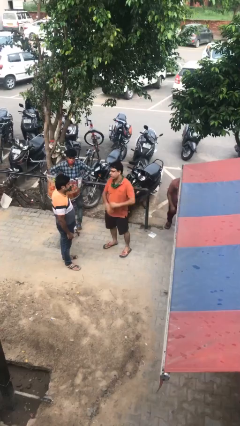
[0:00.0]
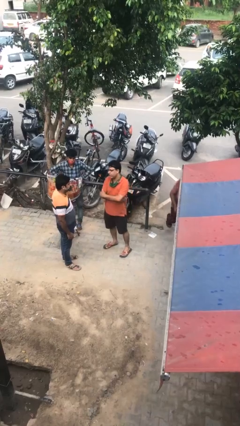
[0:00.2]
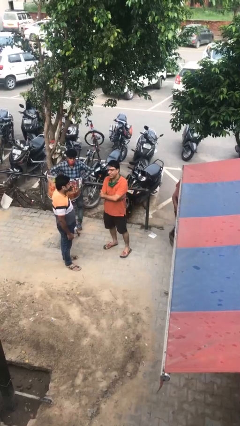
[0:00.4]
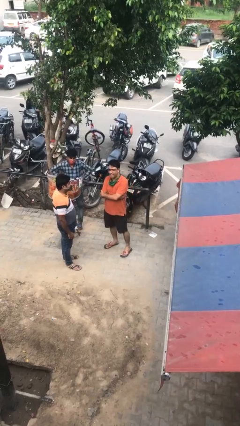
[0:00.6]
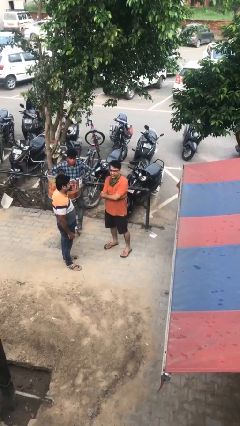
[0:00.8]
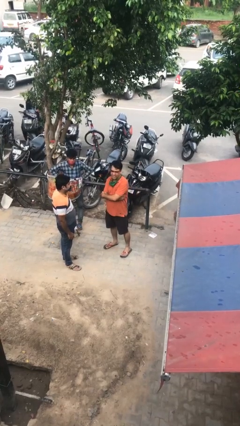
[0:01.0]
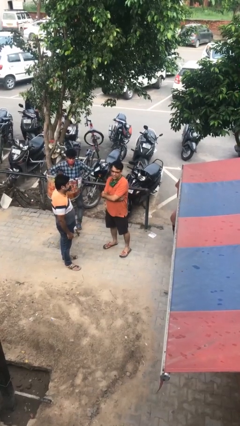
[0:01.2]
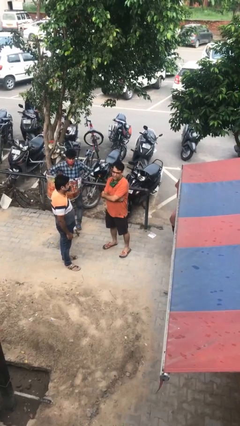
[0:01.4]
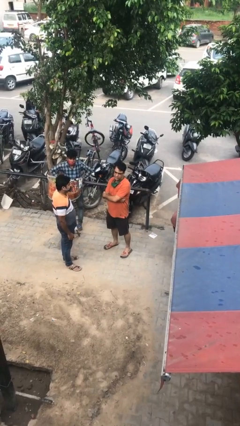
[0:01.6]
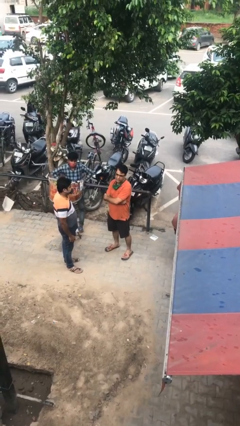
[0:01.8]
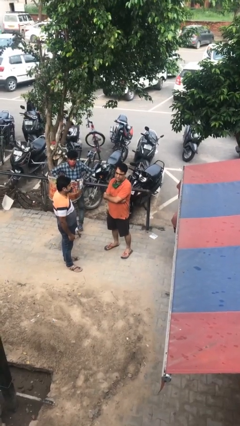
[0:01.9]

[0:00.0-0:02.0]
person laughs with person

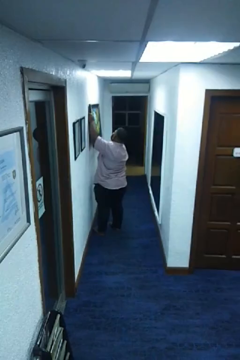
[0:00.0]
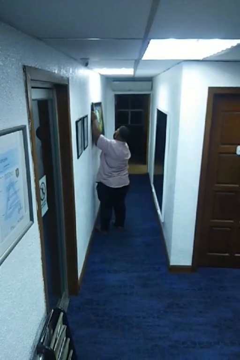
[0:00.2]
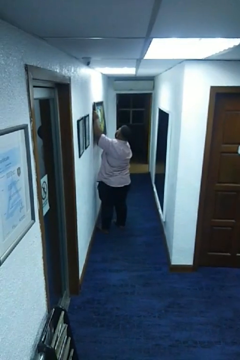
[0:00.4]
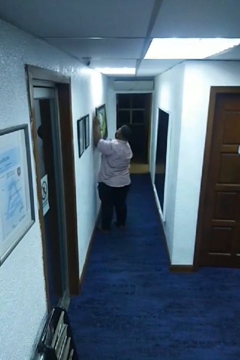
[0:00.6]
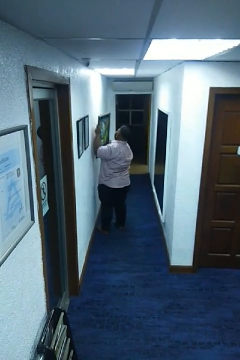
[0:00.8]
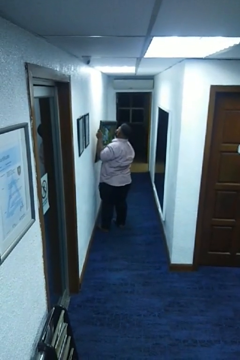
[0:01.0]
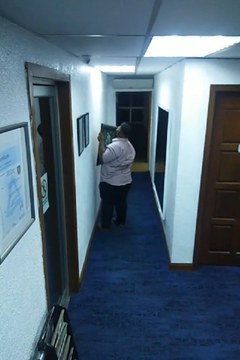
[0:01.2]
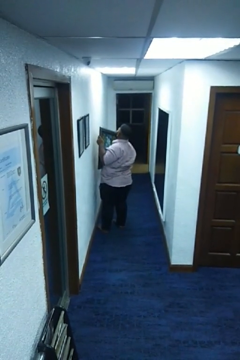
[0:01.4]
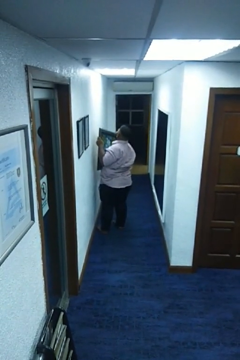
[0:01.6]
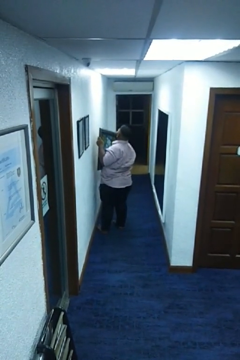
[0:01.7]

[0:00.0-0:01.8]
person takes down picture frame

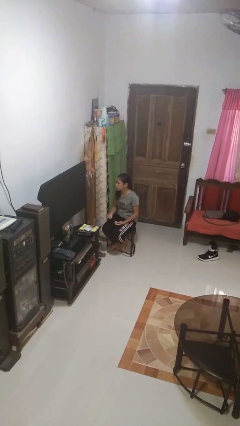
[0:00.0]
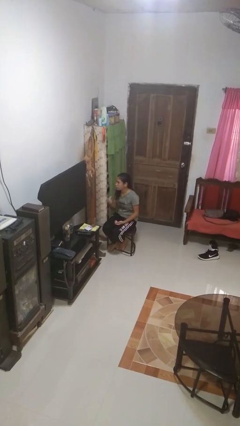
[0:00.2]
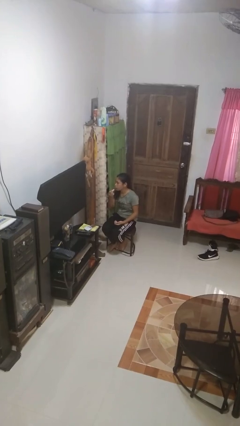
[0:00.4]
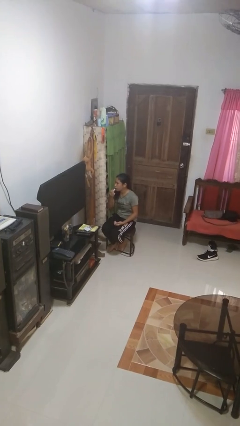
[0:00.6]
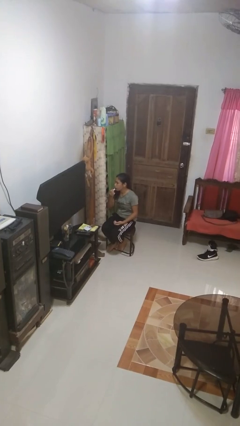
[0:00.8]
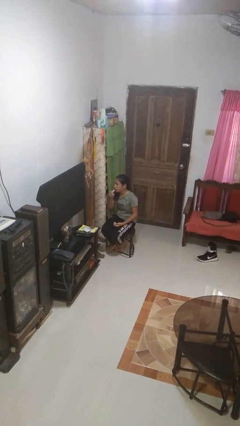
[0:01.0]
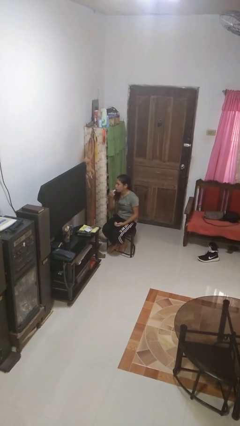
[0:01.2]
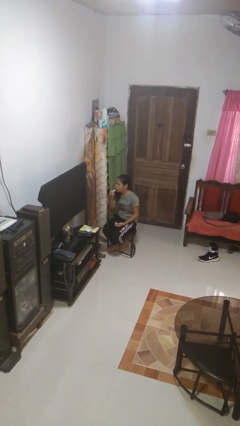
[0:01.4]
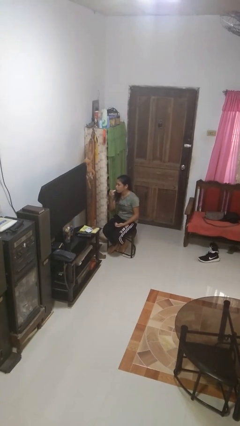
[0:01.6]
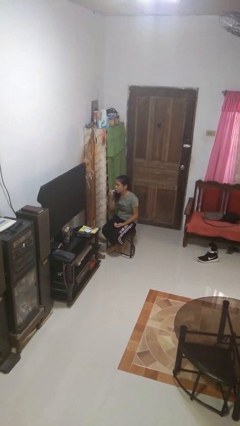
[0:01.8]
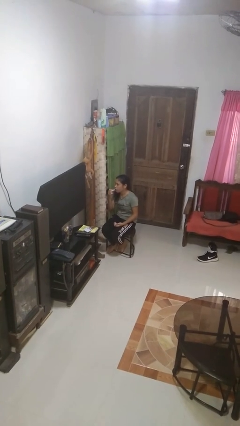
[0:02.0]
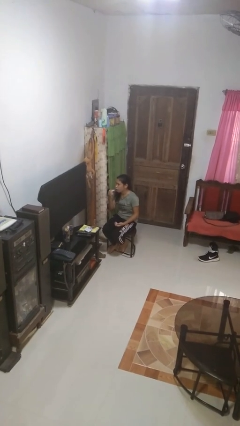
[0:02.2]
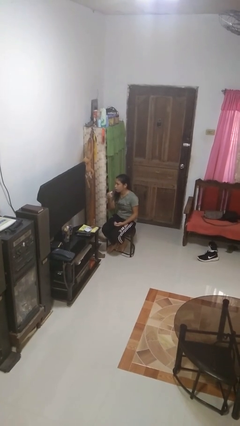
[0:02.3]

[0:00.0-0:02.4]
person applies lip makeup

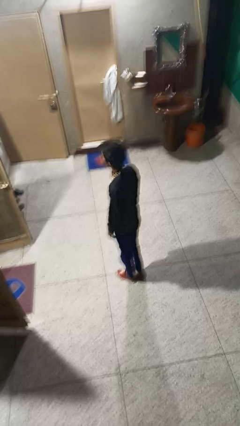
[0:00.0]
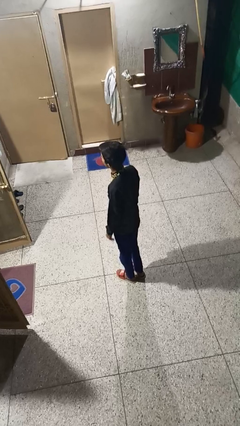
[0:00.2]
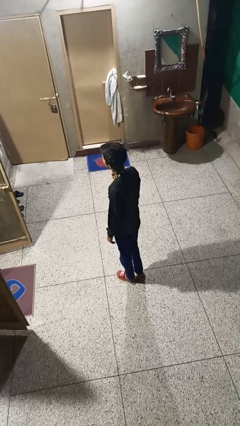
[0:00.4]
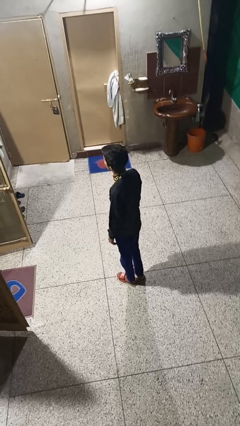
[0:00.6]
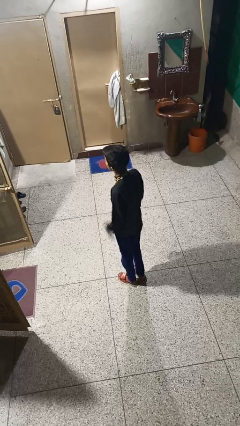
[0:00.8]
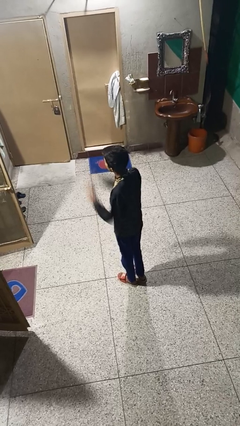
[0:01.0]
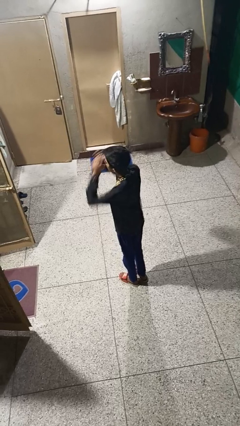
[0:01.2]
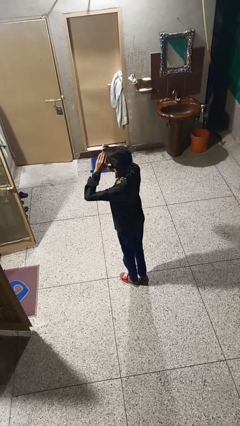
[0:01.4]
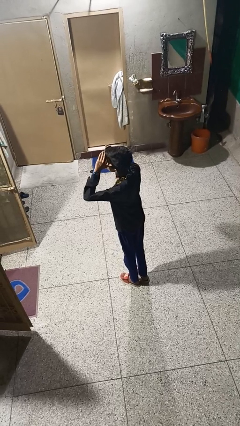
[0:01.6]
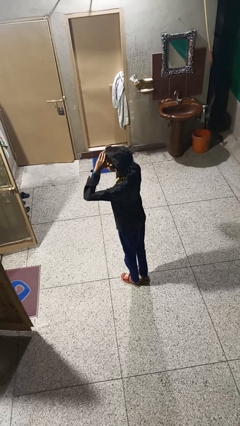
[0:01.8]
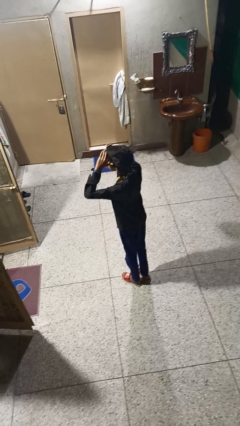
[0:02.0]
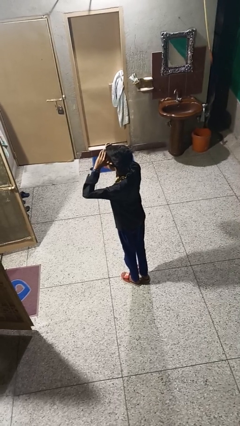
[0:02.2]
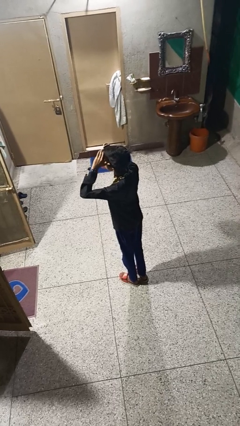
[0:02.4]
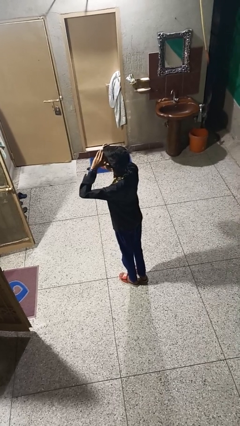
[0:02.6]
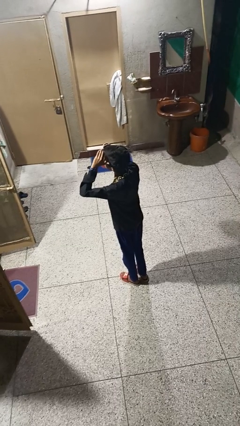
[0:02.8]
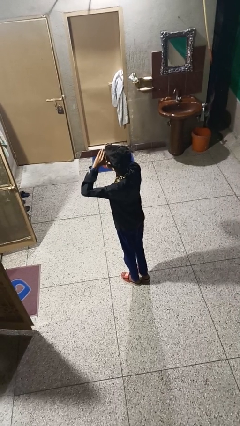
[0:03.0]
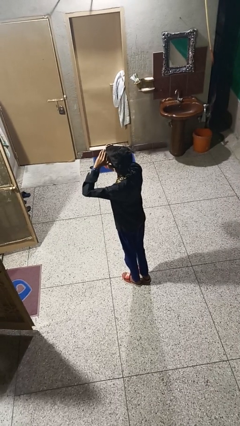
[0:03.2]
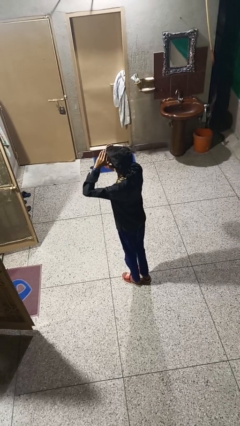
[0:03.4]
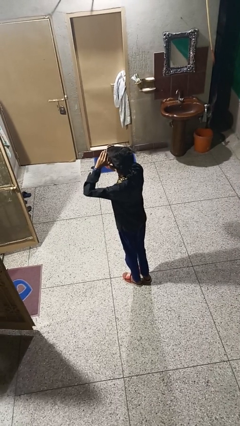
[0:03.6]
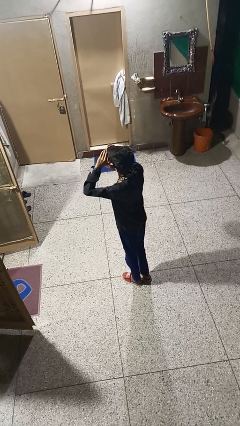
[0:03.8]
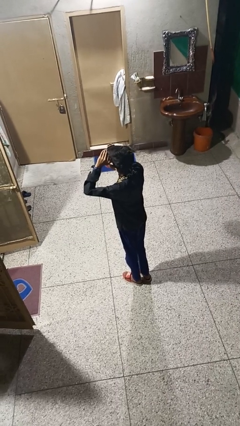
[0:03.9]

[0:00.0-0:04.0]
person shades eyes

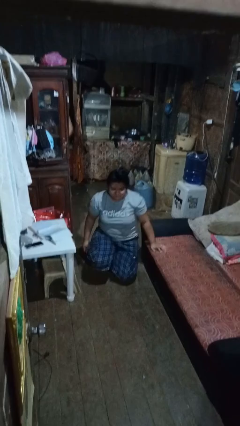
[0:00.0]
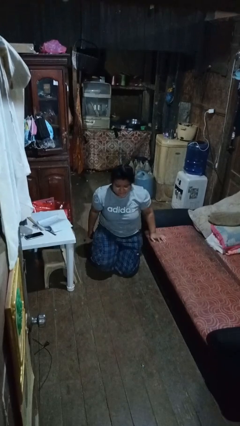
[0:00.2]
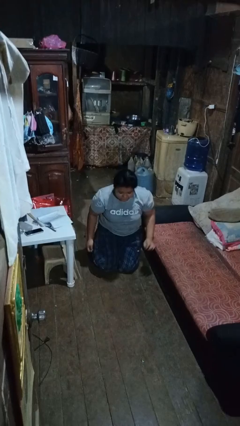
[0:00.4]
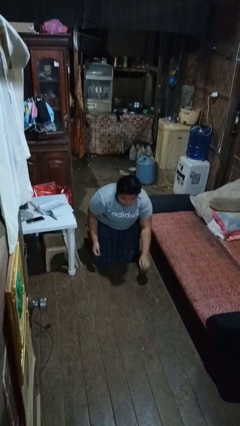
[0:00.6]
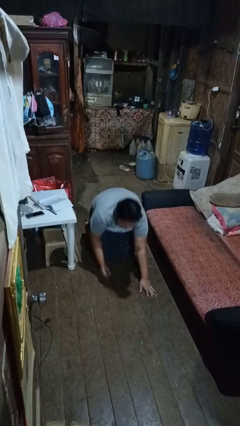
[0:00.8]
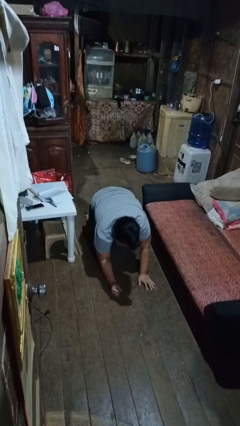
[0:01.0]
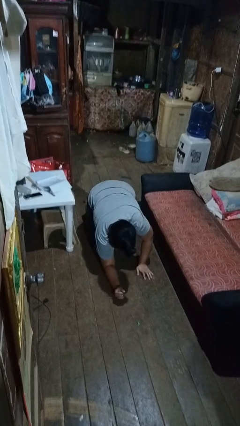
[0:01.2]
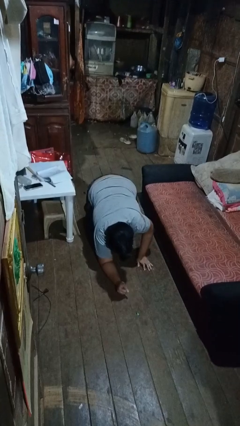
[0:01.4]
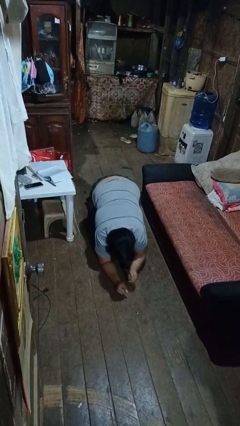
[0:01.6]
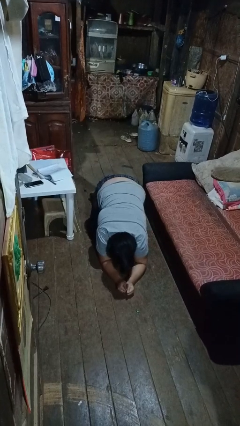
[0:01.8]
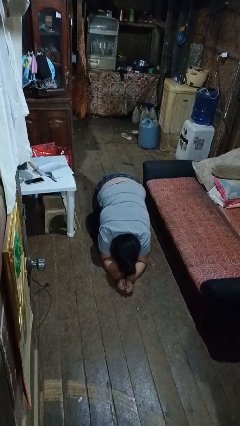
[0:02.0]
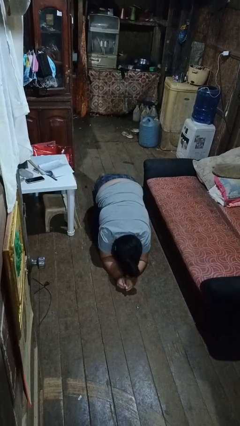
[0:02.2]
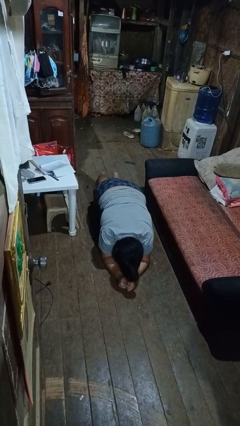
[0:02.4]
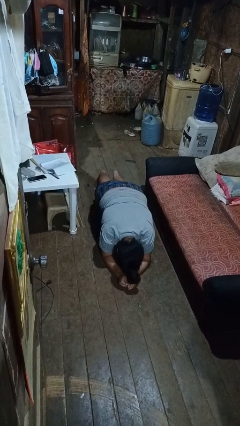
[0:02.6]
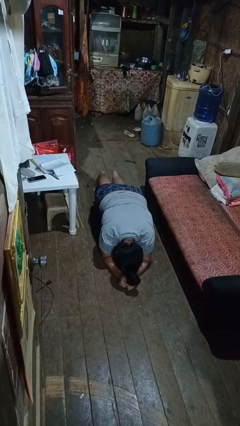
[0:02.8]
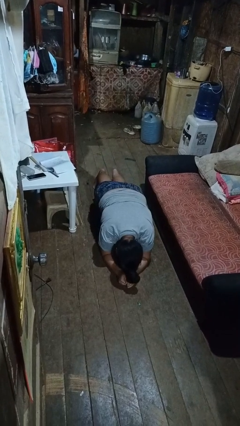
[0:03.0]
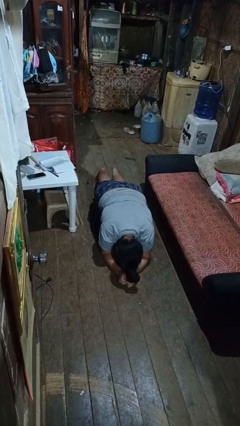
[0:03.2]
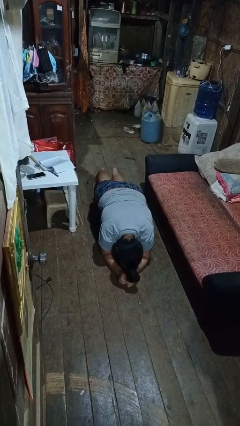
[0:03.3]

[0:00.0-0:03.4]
person exercises with plank

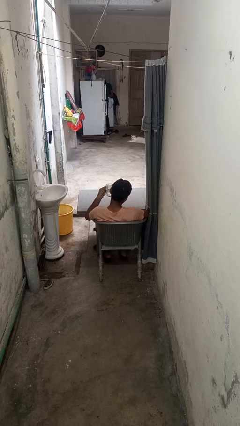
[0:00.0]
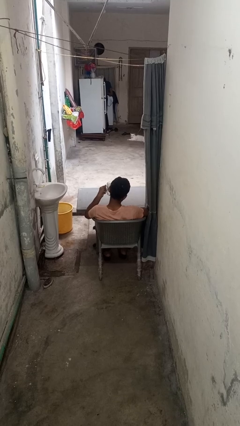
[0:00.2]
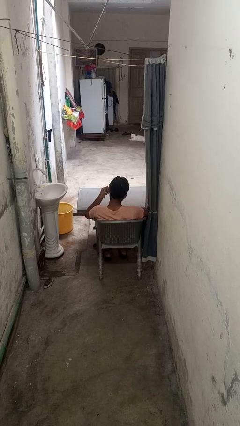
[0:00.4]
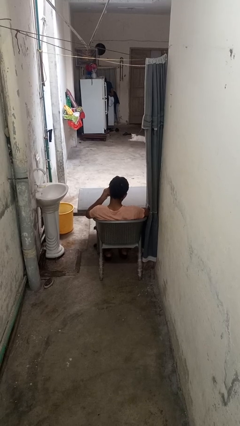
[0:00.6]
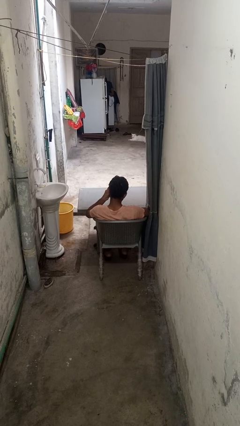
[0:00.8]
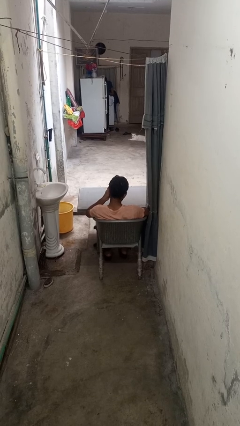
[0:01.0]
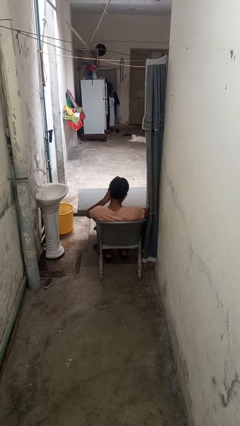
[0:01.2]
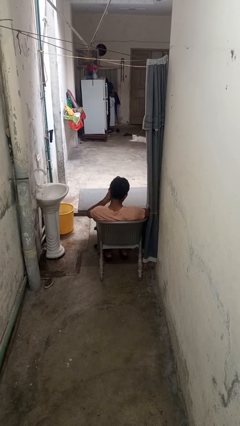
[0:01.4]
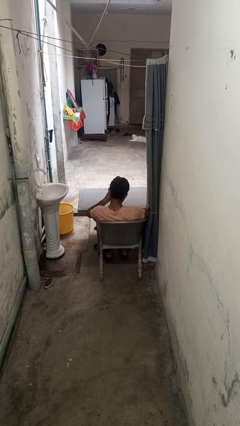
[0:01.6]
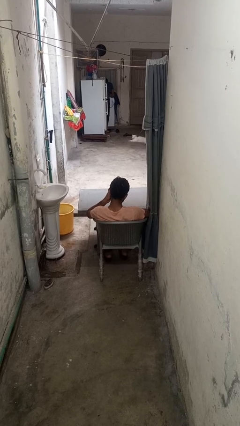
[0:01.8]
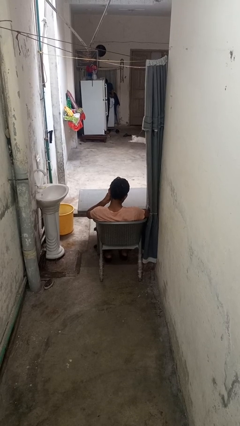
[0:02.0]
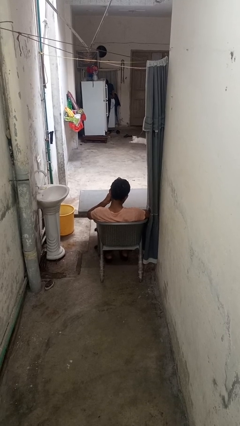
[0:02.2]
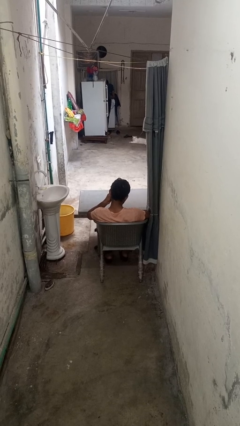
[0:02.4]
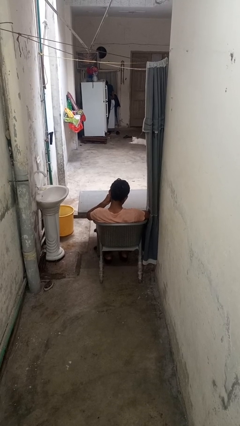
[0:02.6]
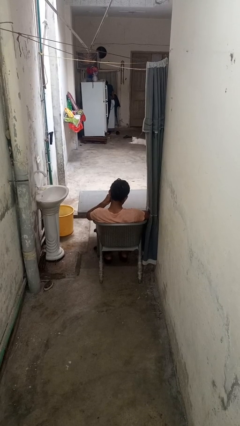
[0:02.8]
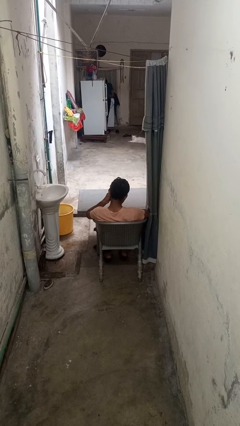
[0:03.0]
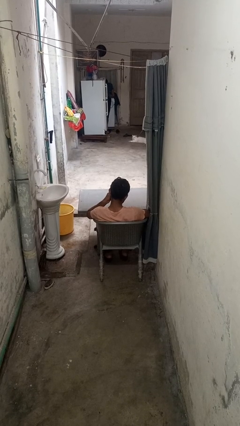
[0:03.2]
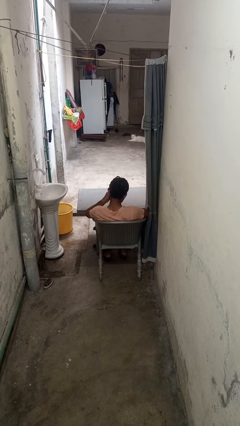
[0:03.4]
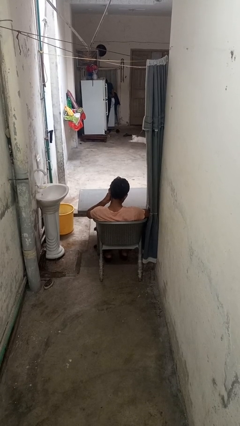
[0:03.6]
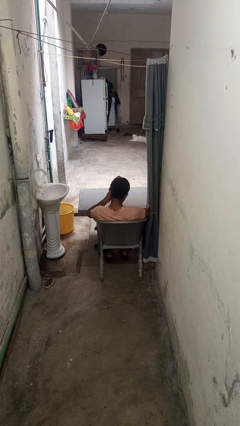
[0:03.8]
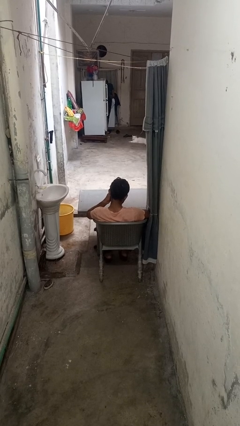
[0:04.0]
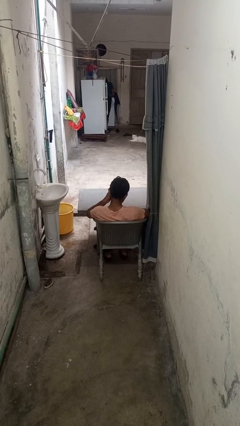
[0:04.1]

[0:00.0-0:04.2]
person drinks from mug
